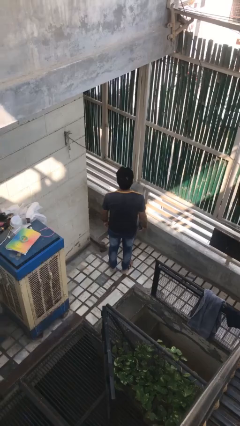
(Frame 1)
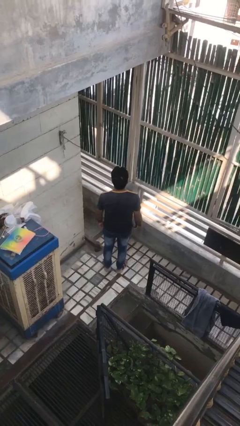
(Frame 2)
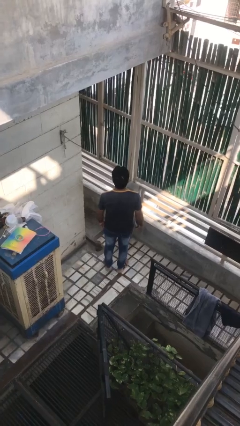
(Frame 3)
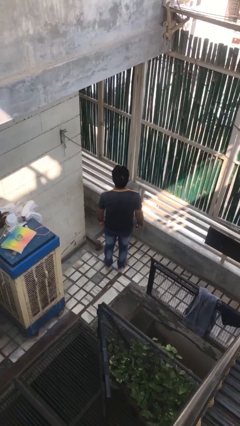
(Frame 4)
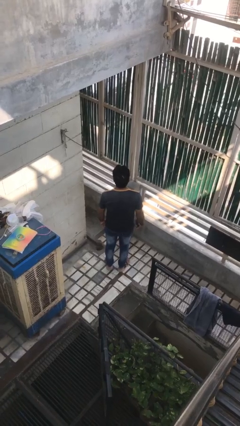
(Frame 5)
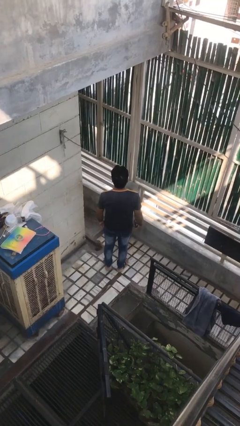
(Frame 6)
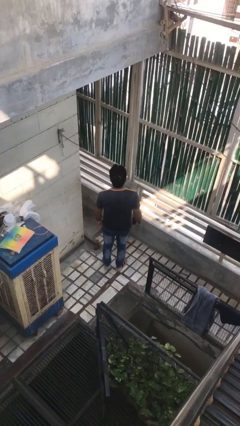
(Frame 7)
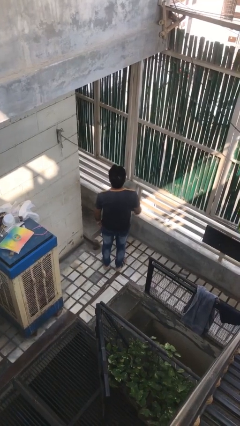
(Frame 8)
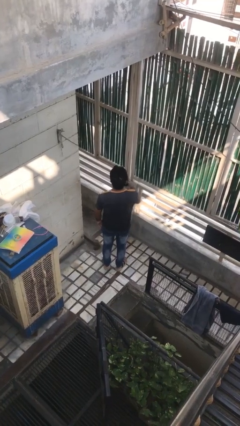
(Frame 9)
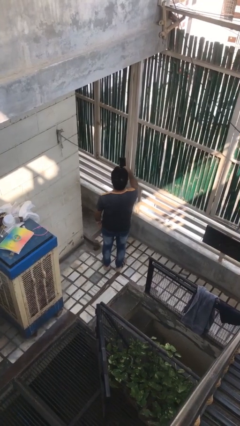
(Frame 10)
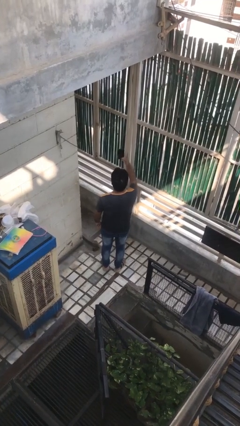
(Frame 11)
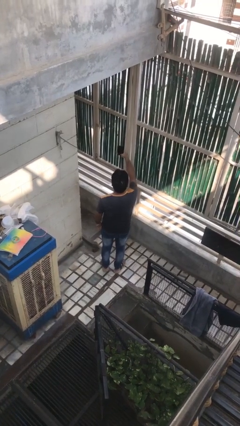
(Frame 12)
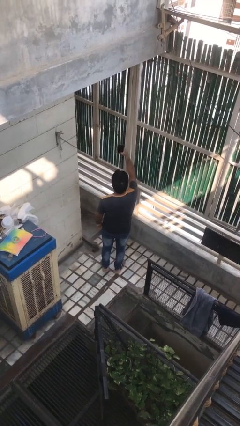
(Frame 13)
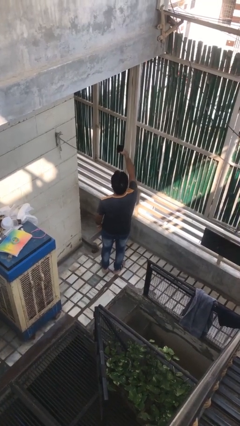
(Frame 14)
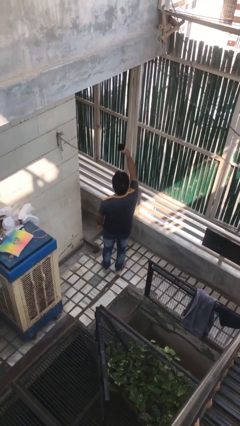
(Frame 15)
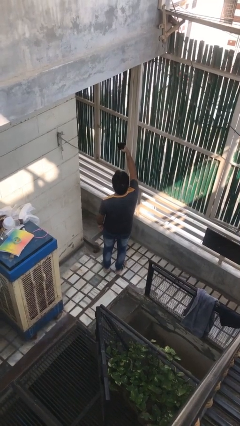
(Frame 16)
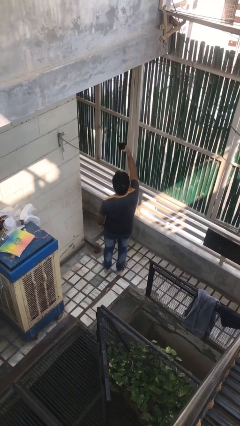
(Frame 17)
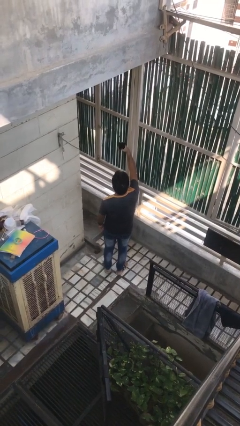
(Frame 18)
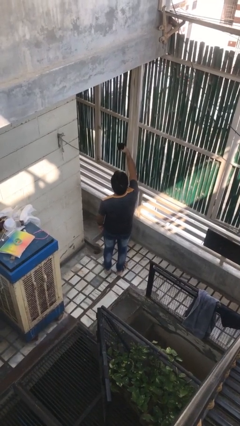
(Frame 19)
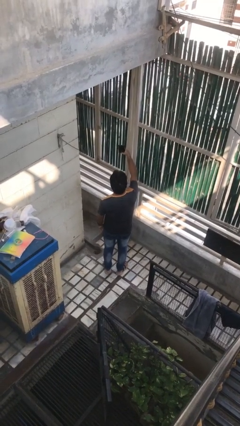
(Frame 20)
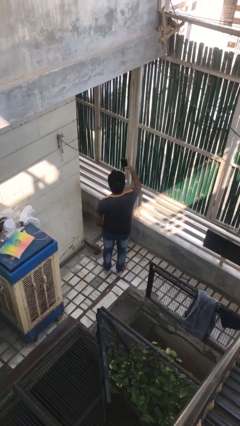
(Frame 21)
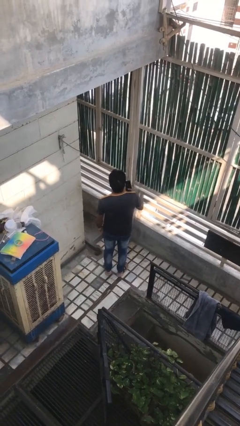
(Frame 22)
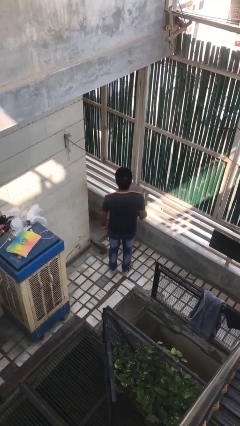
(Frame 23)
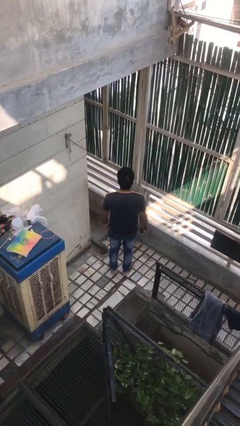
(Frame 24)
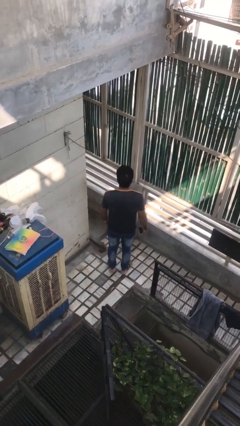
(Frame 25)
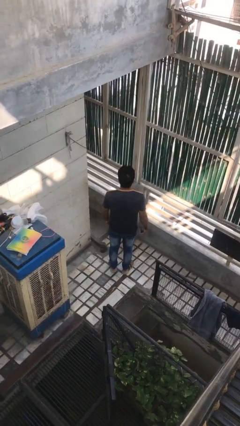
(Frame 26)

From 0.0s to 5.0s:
person takes selfie

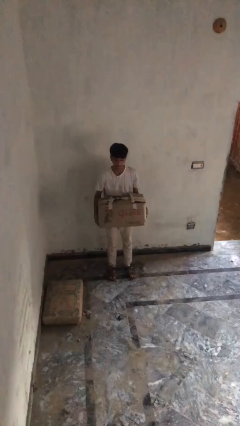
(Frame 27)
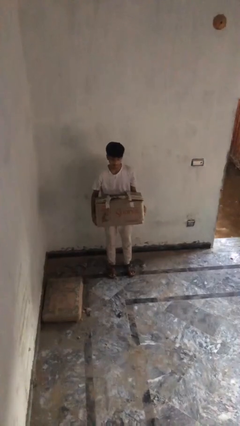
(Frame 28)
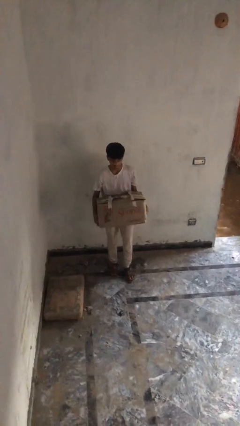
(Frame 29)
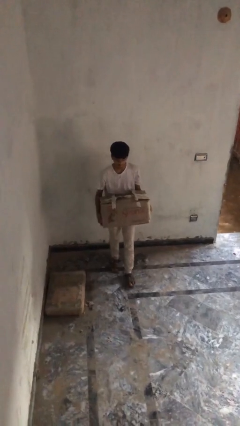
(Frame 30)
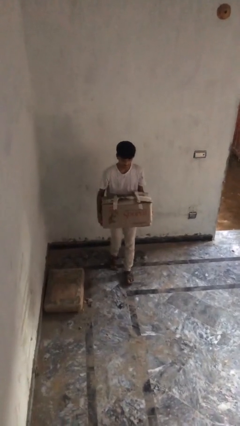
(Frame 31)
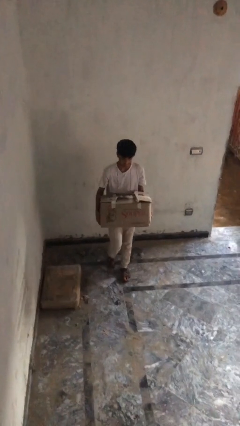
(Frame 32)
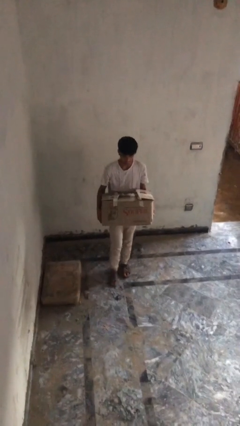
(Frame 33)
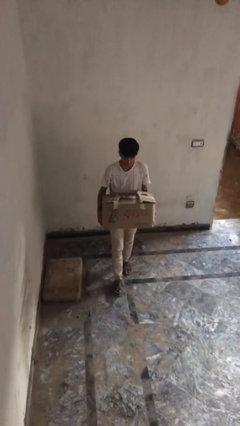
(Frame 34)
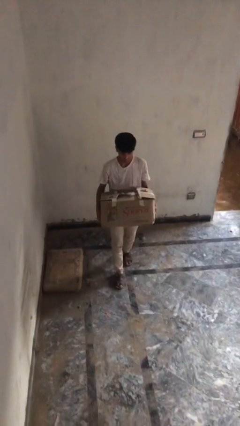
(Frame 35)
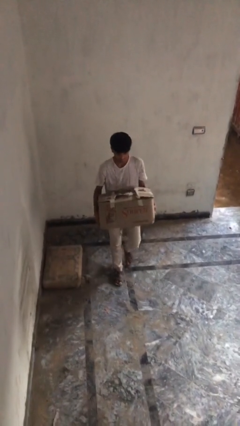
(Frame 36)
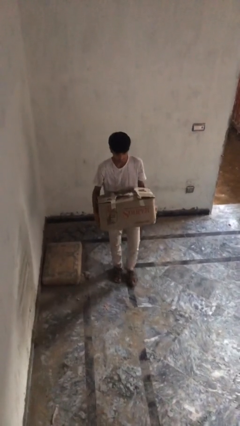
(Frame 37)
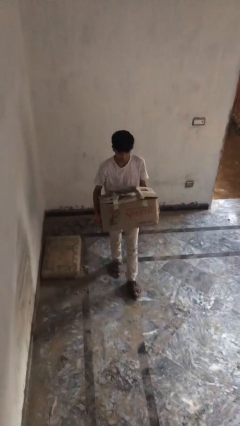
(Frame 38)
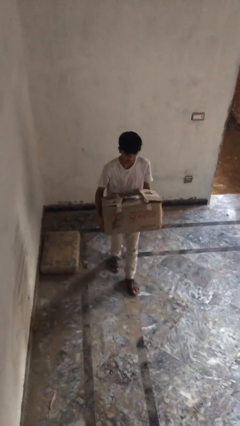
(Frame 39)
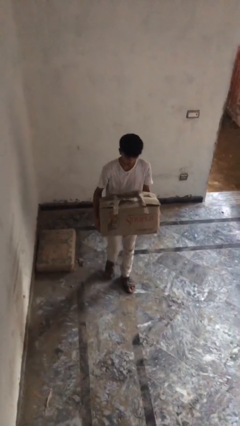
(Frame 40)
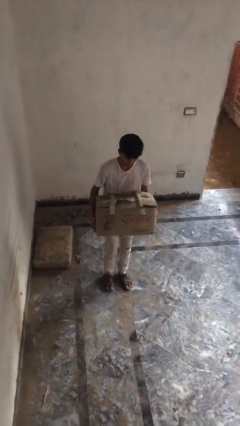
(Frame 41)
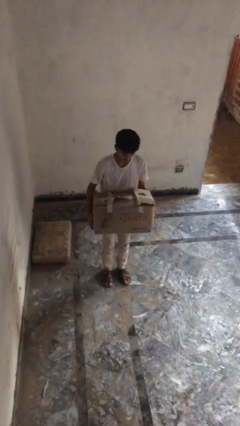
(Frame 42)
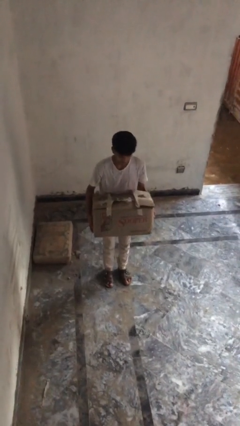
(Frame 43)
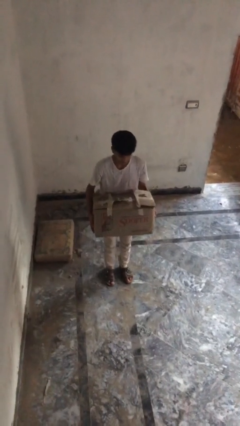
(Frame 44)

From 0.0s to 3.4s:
person carries heavy object

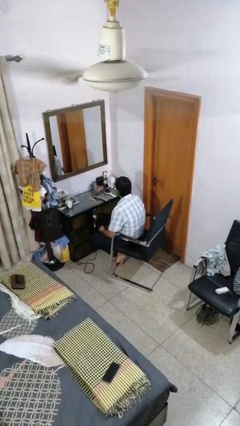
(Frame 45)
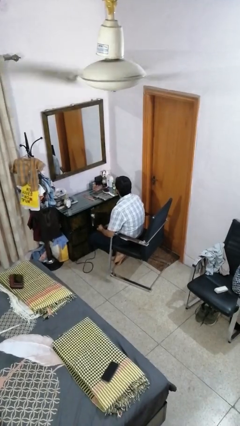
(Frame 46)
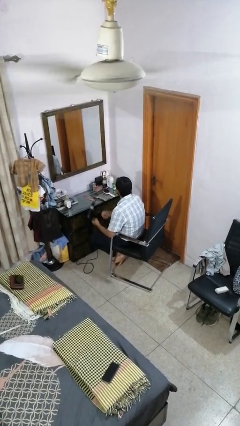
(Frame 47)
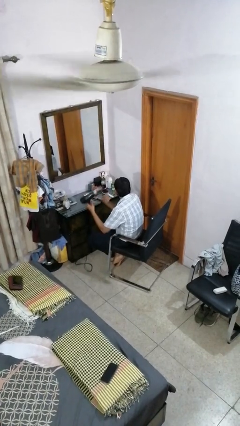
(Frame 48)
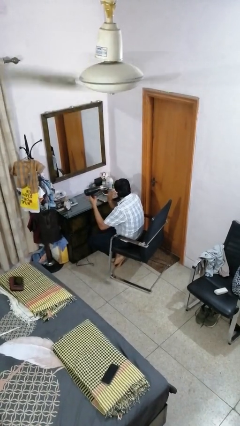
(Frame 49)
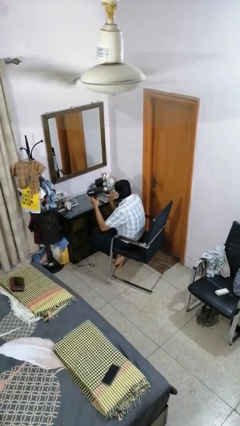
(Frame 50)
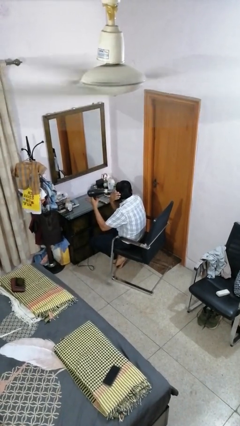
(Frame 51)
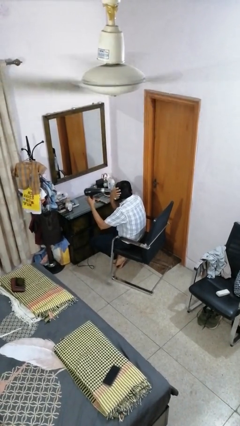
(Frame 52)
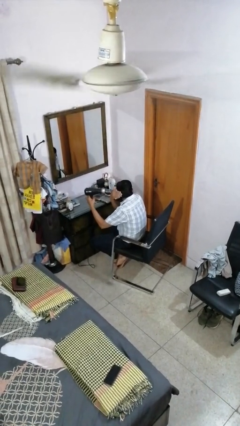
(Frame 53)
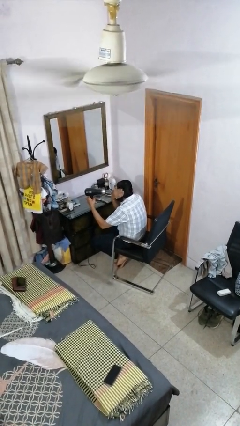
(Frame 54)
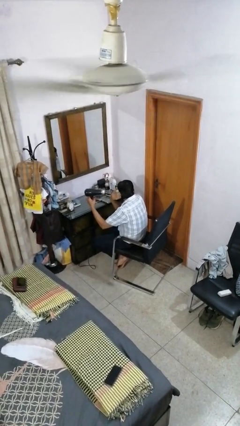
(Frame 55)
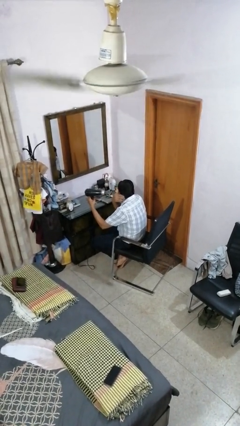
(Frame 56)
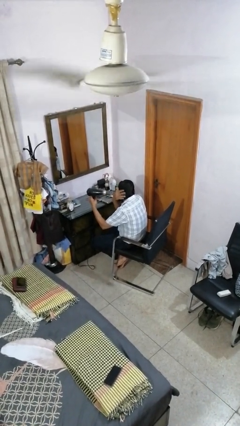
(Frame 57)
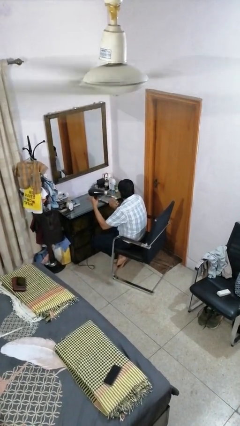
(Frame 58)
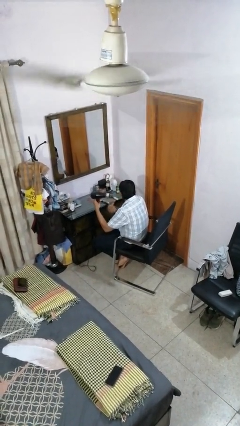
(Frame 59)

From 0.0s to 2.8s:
person dries hair with hairdryer

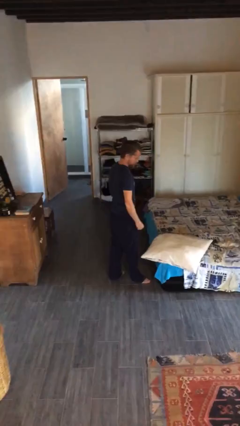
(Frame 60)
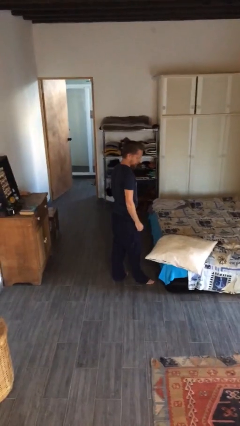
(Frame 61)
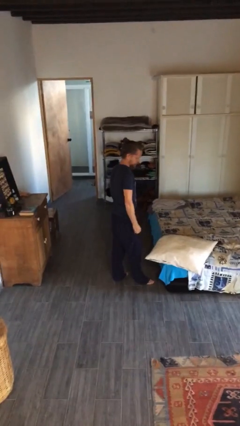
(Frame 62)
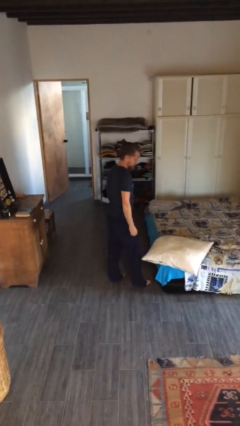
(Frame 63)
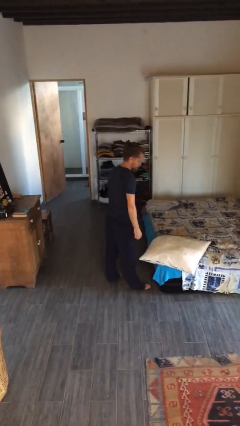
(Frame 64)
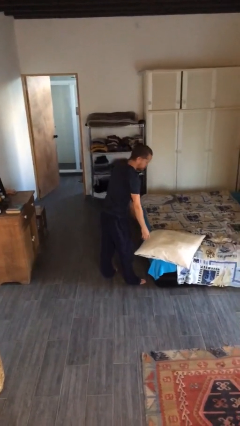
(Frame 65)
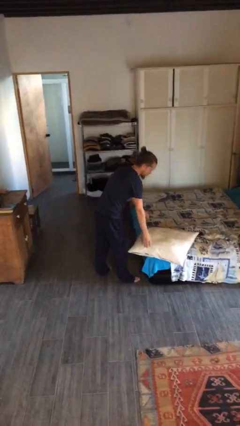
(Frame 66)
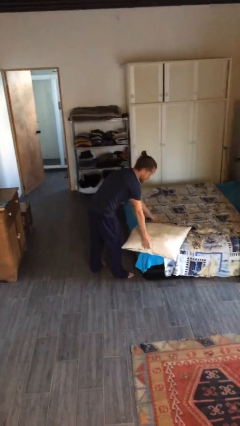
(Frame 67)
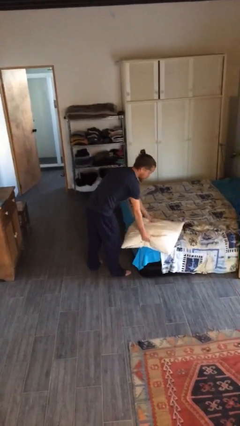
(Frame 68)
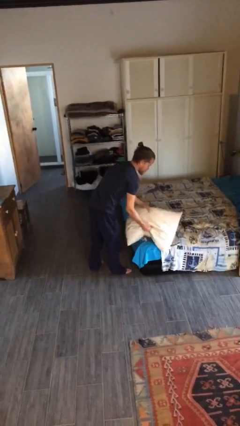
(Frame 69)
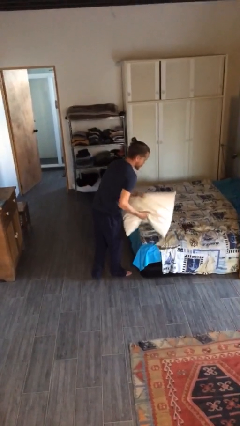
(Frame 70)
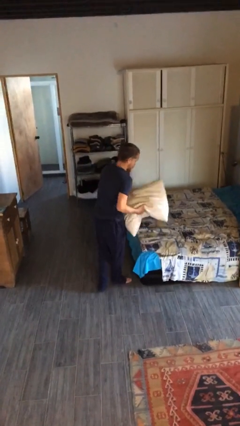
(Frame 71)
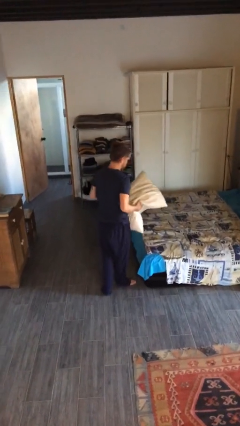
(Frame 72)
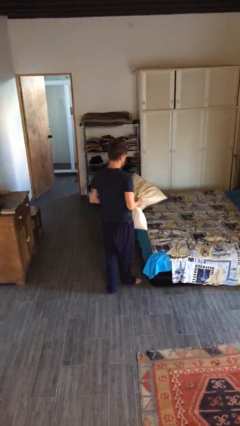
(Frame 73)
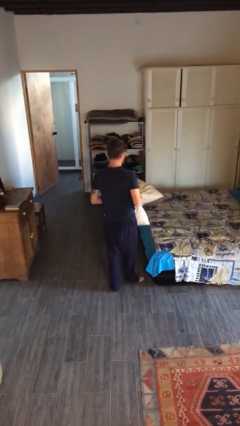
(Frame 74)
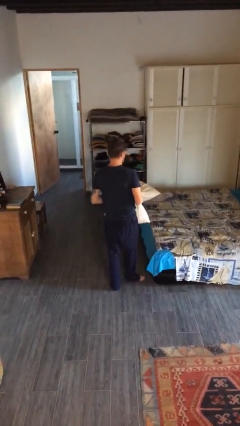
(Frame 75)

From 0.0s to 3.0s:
person picks up object from bed

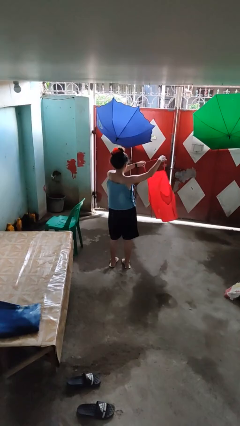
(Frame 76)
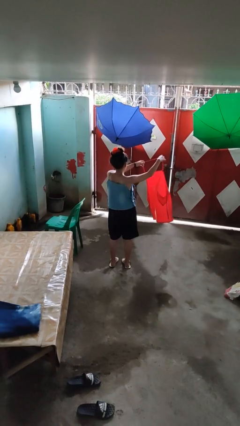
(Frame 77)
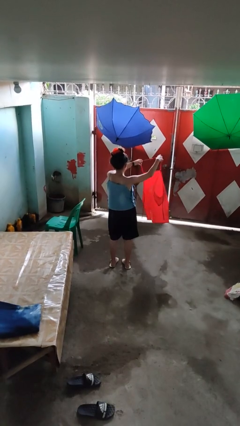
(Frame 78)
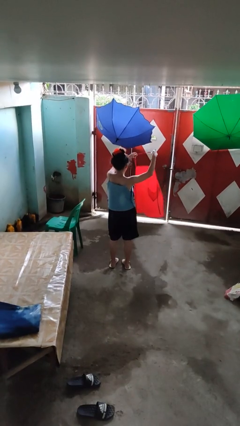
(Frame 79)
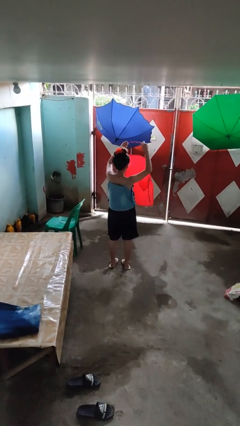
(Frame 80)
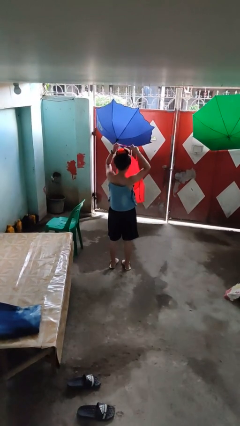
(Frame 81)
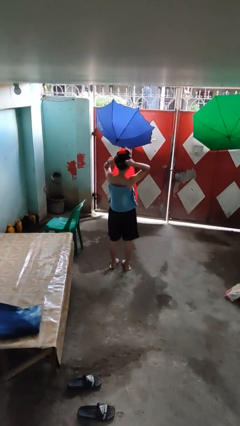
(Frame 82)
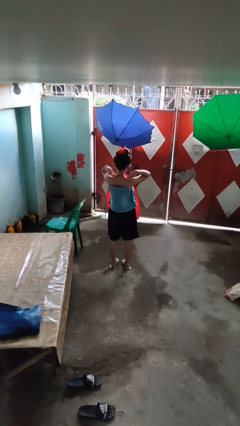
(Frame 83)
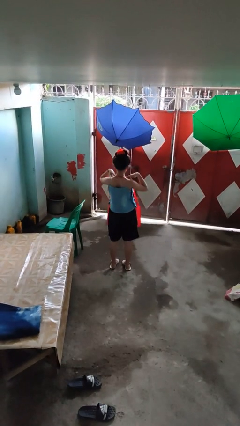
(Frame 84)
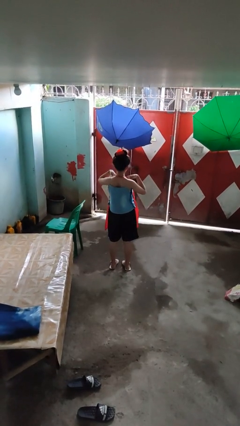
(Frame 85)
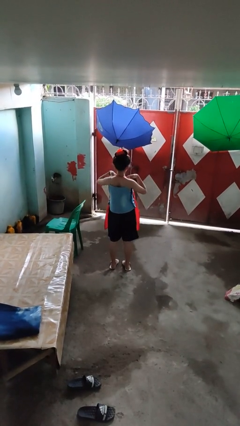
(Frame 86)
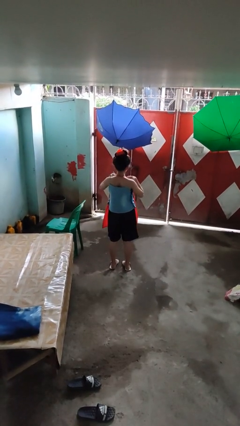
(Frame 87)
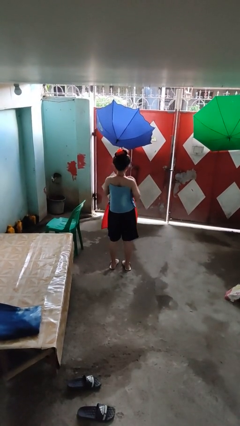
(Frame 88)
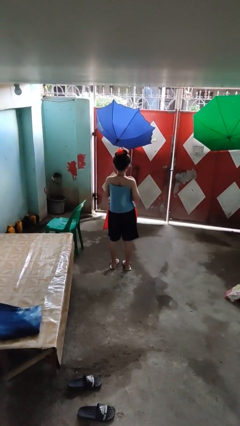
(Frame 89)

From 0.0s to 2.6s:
person puts on apron

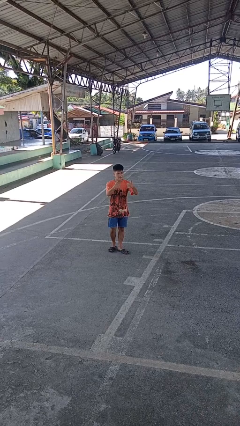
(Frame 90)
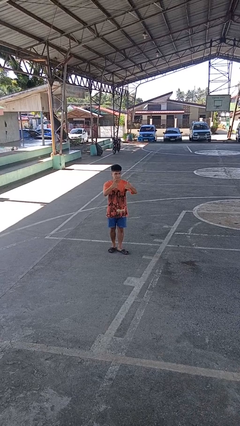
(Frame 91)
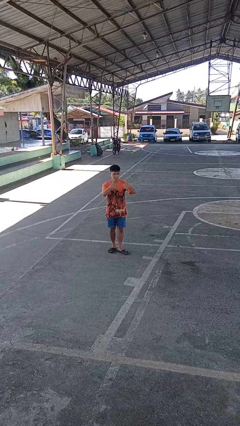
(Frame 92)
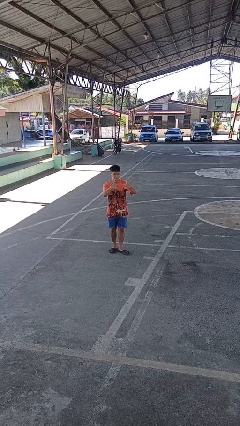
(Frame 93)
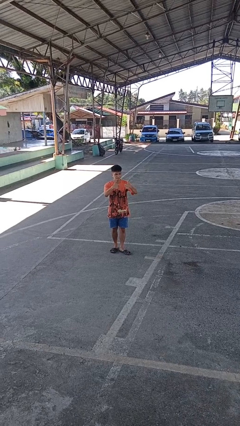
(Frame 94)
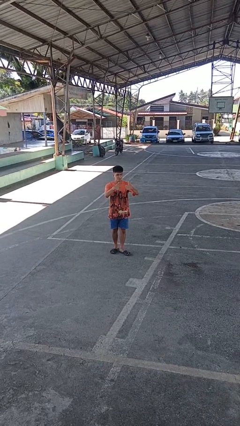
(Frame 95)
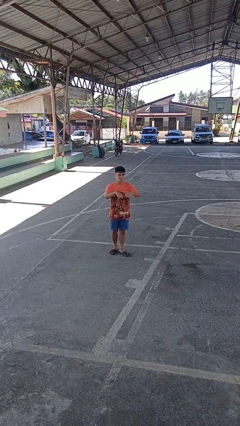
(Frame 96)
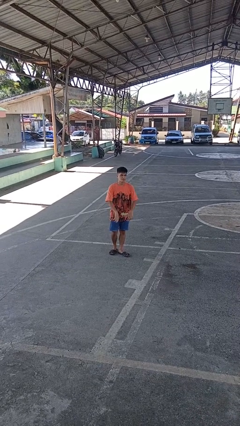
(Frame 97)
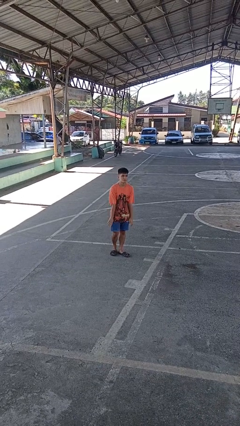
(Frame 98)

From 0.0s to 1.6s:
person gestures thumbs up
